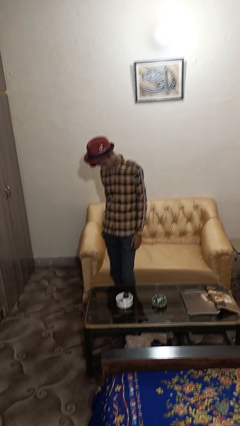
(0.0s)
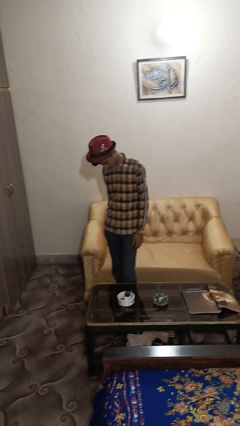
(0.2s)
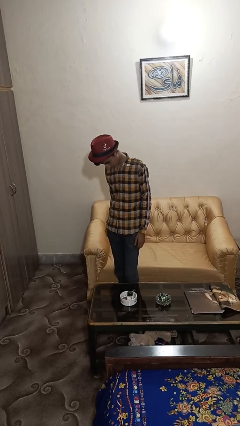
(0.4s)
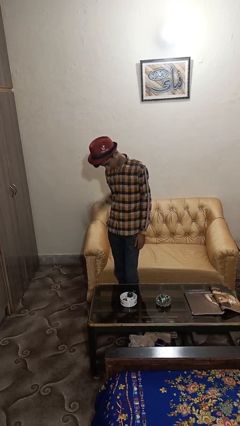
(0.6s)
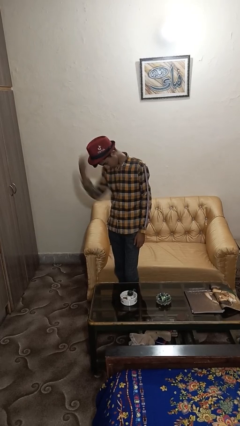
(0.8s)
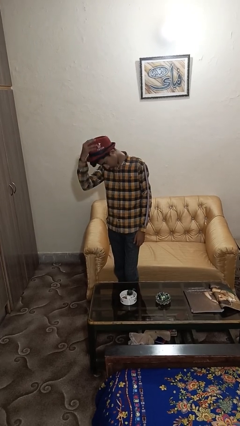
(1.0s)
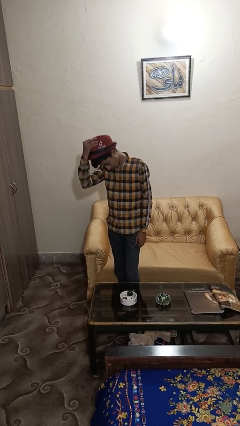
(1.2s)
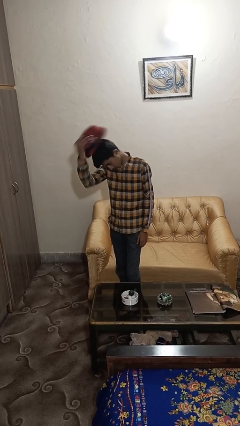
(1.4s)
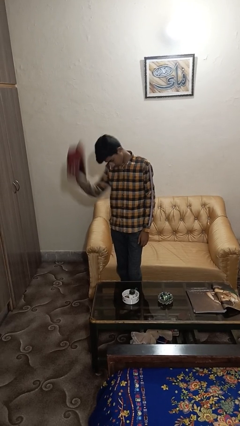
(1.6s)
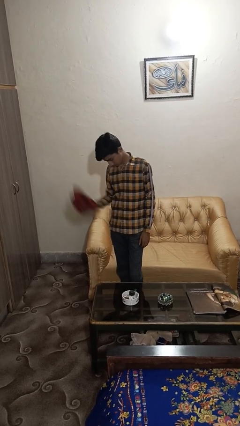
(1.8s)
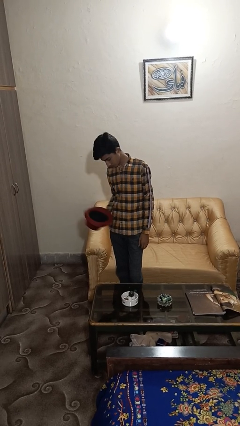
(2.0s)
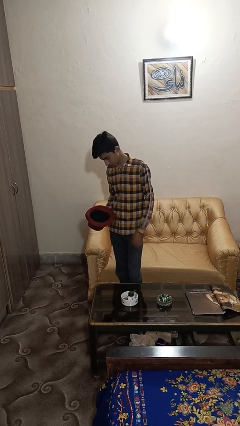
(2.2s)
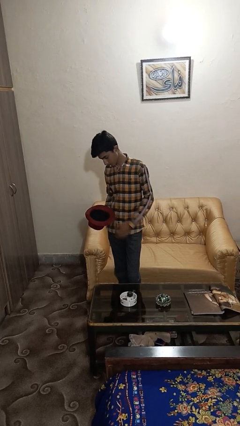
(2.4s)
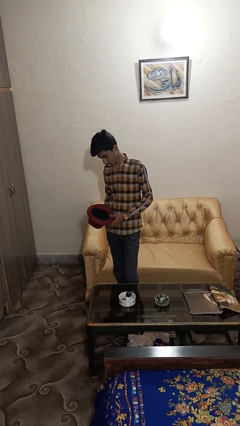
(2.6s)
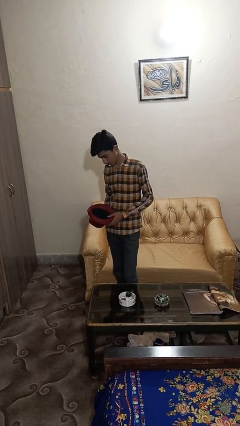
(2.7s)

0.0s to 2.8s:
person takes off hat

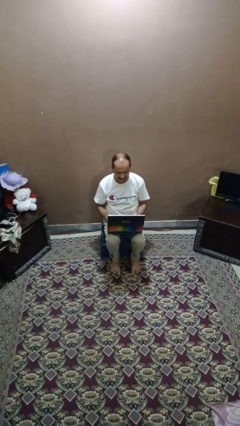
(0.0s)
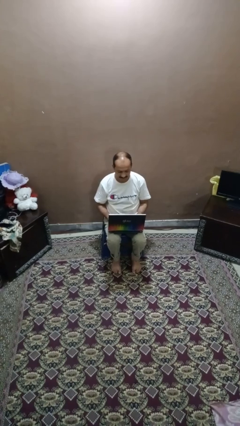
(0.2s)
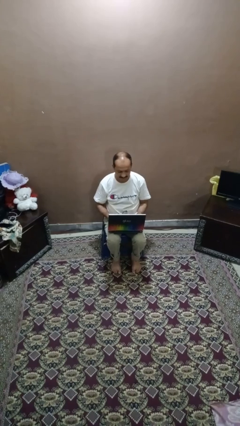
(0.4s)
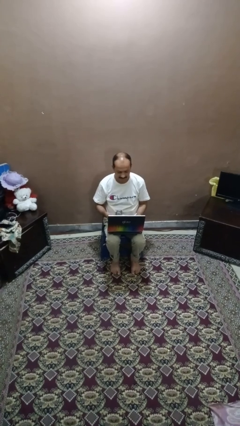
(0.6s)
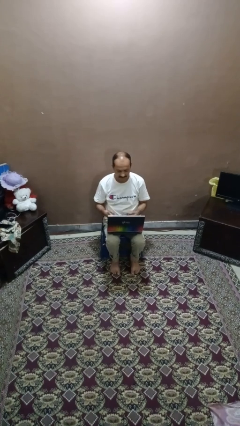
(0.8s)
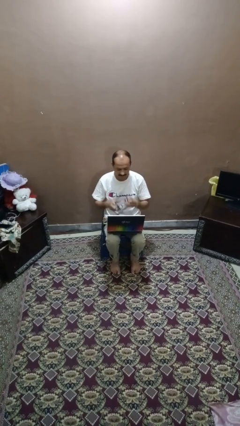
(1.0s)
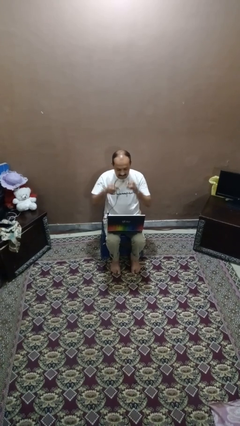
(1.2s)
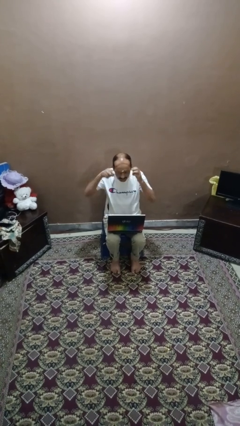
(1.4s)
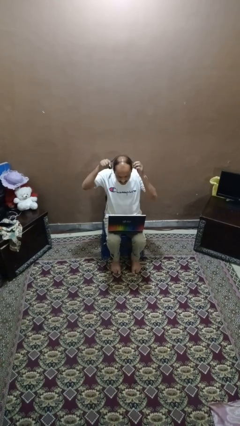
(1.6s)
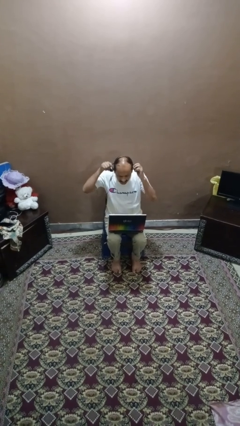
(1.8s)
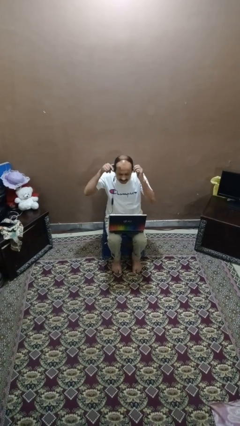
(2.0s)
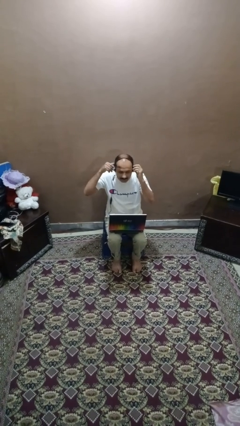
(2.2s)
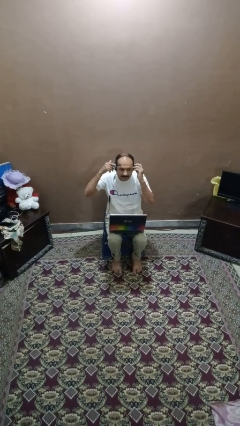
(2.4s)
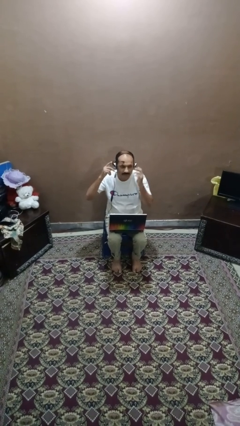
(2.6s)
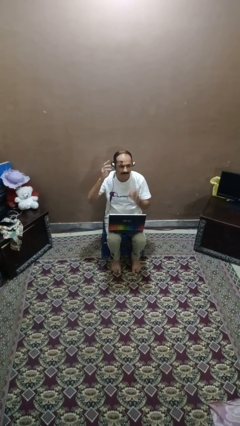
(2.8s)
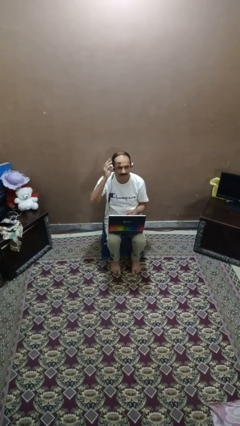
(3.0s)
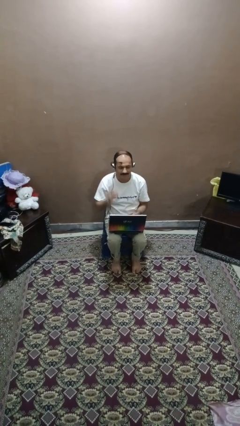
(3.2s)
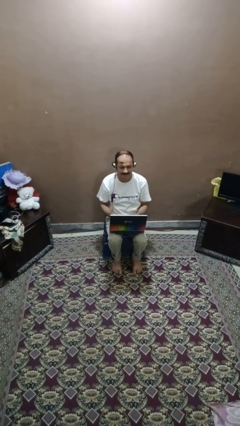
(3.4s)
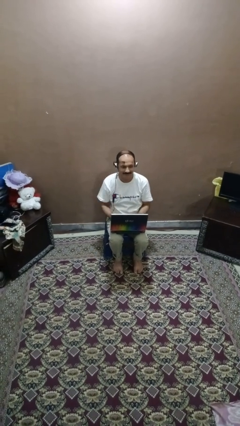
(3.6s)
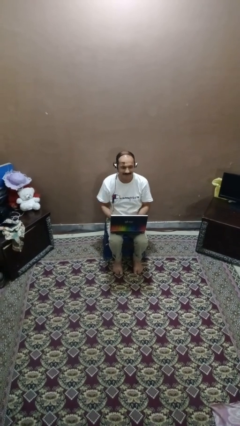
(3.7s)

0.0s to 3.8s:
person puts on headphones

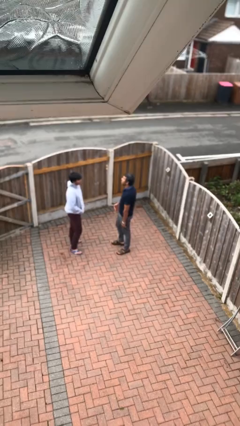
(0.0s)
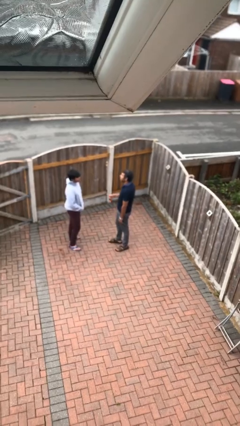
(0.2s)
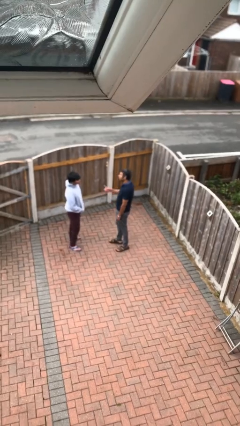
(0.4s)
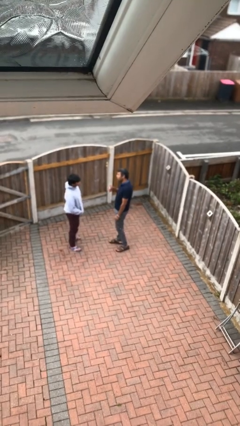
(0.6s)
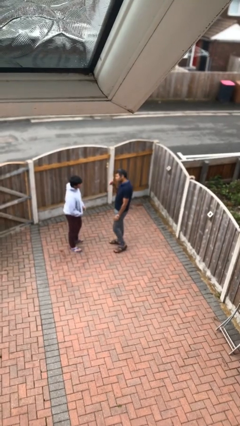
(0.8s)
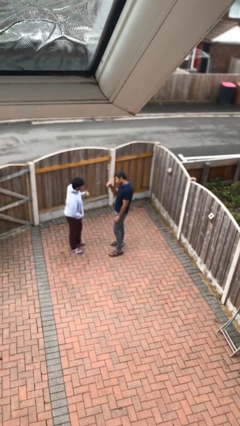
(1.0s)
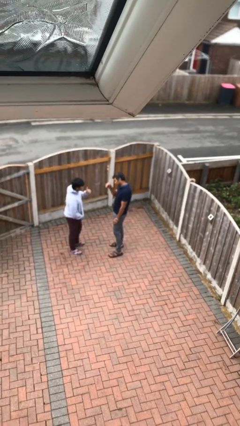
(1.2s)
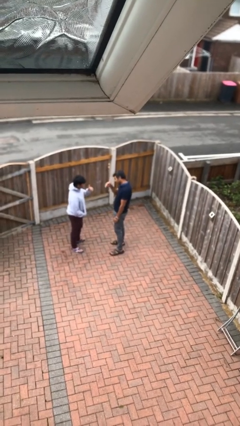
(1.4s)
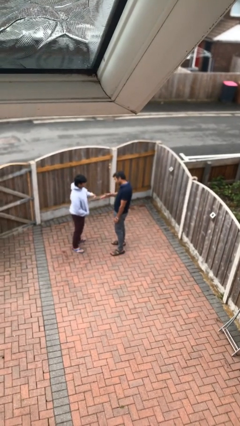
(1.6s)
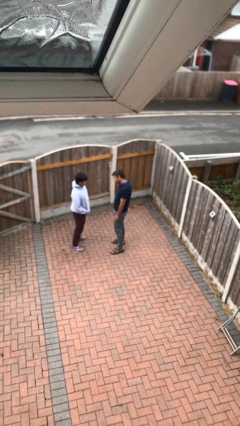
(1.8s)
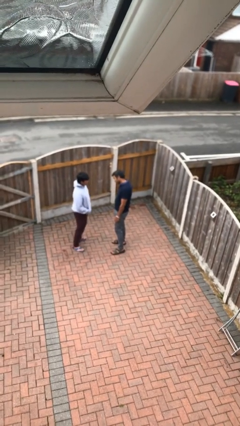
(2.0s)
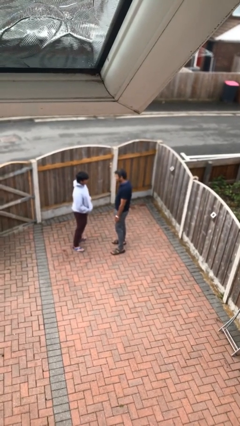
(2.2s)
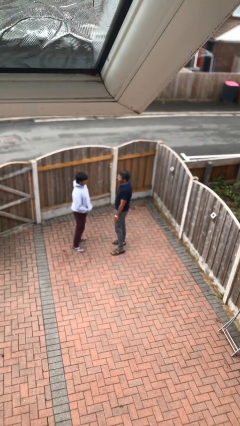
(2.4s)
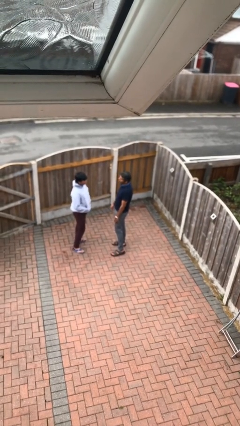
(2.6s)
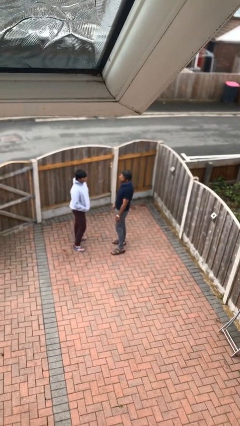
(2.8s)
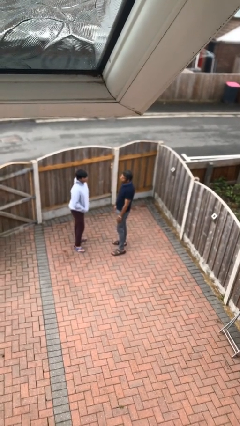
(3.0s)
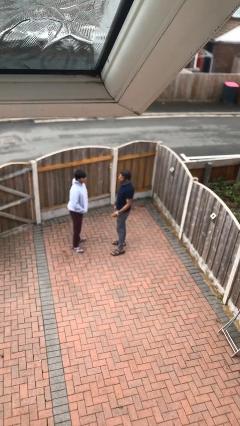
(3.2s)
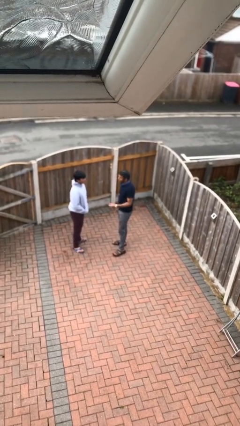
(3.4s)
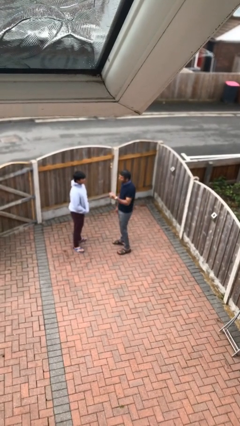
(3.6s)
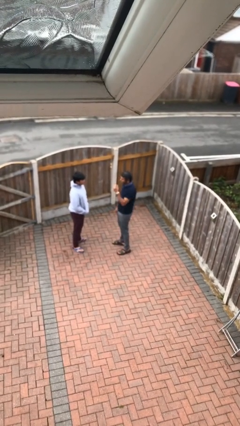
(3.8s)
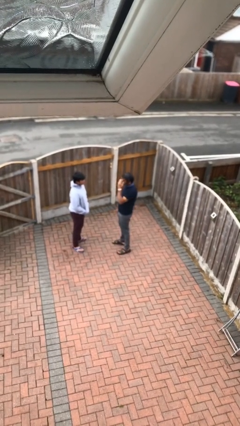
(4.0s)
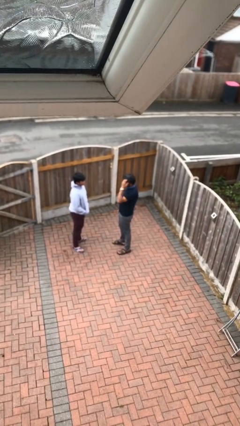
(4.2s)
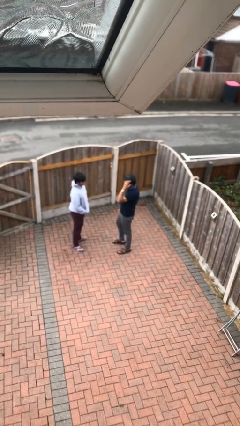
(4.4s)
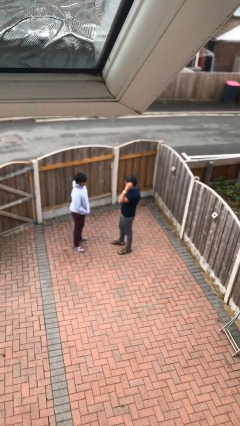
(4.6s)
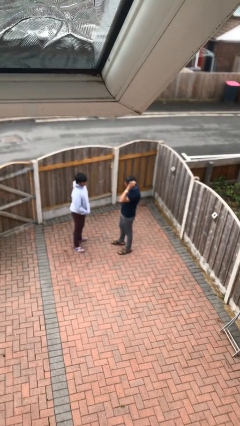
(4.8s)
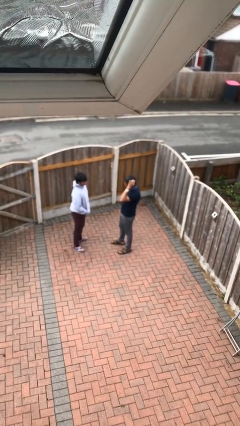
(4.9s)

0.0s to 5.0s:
person talks to person

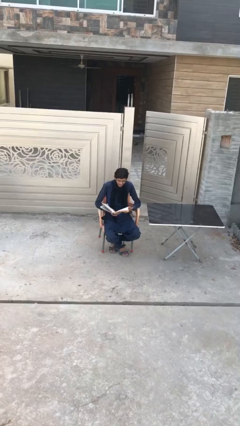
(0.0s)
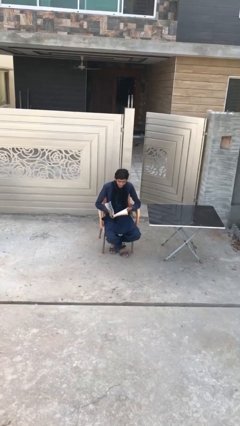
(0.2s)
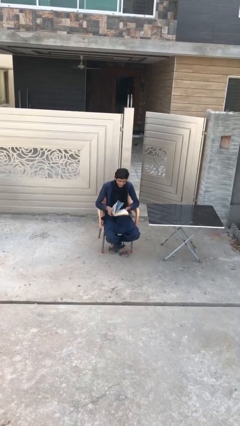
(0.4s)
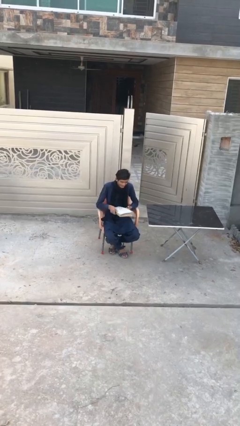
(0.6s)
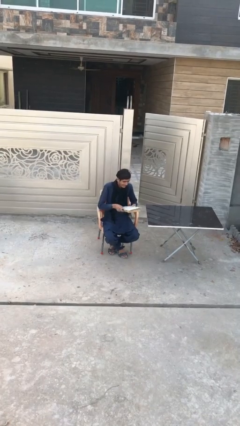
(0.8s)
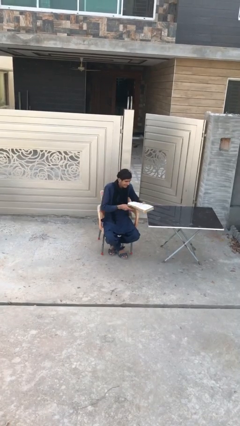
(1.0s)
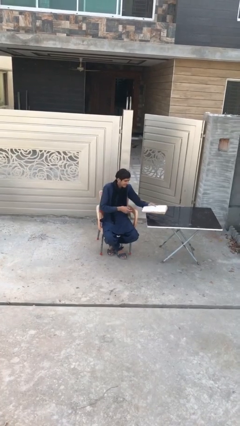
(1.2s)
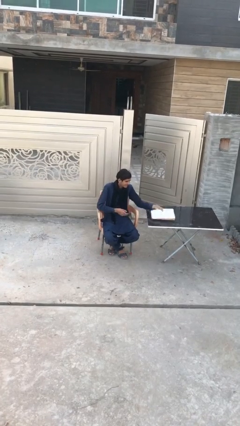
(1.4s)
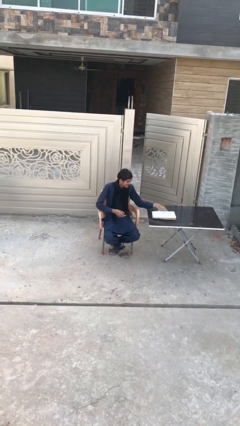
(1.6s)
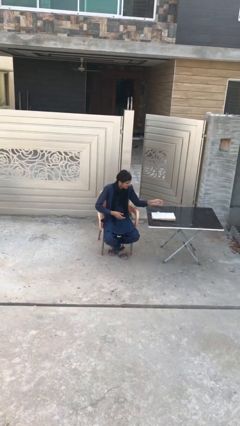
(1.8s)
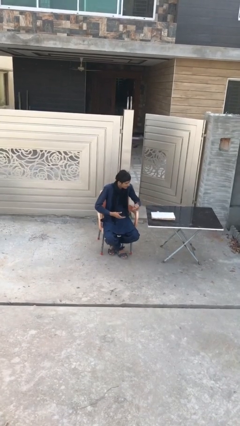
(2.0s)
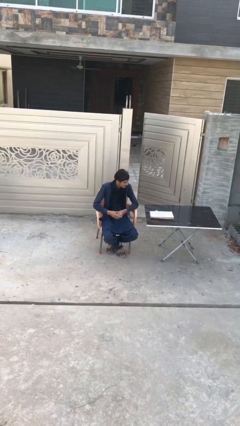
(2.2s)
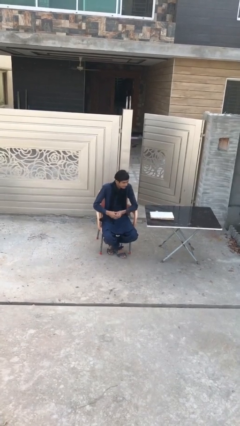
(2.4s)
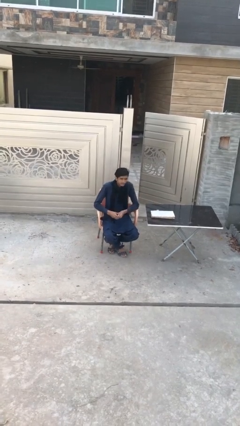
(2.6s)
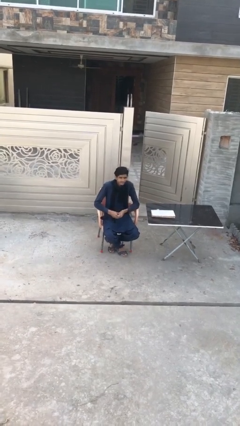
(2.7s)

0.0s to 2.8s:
person puts down object on table

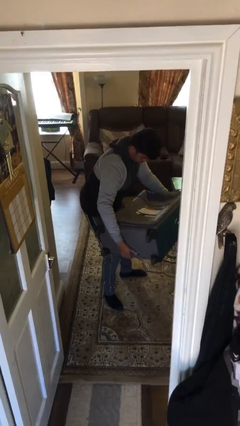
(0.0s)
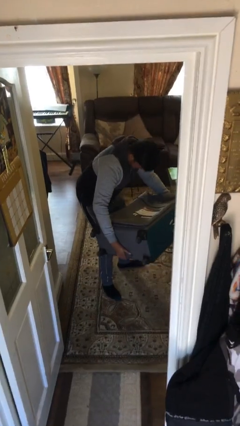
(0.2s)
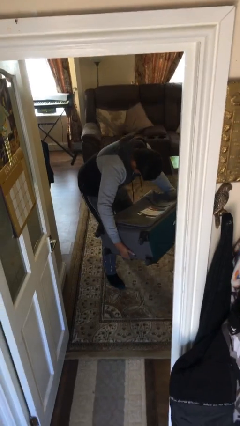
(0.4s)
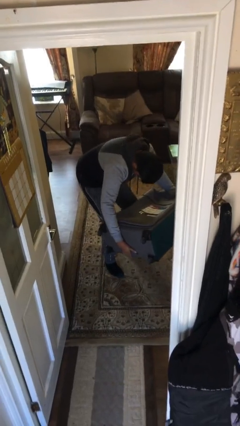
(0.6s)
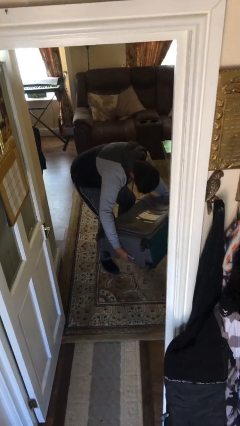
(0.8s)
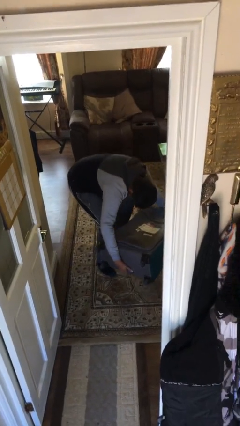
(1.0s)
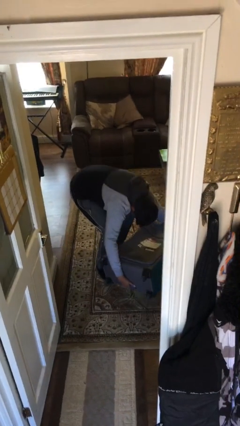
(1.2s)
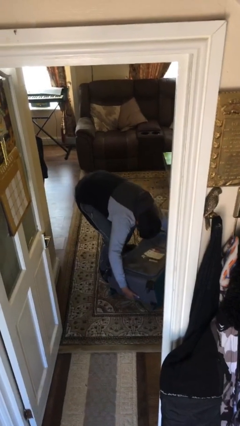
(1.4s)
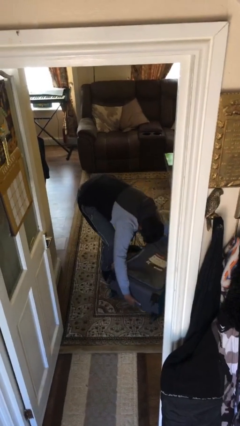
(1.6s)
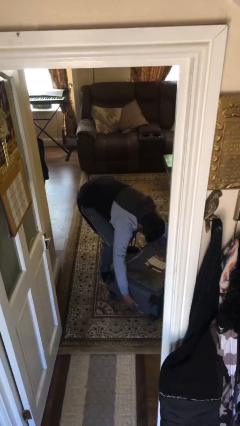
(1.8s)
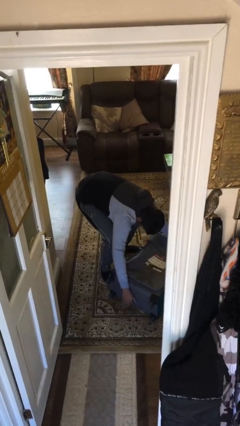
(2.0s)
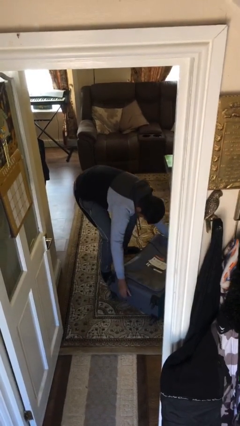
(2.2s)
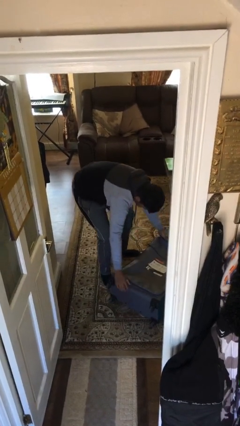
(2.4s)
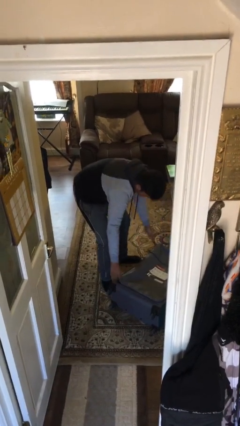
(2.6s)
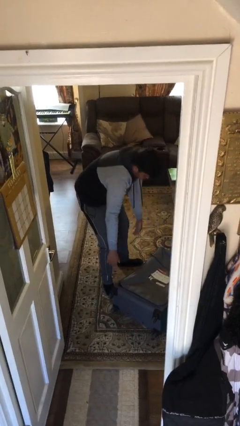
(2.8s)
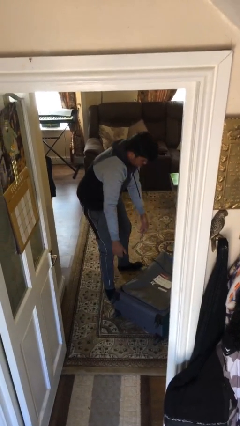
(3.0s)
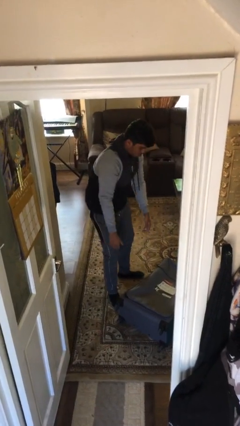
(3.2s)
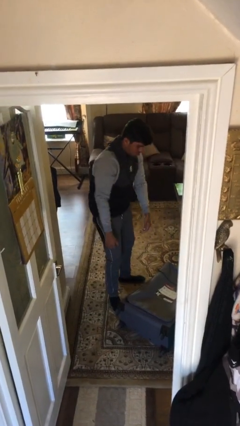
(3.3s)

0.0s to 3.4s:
person puts down object on floor
